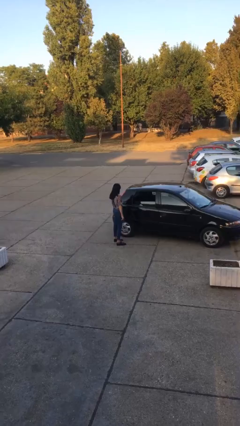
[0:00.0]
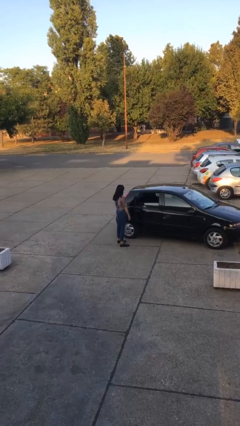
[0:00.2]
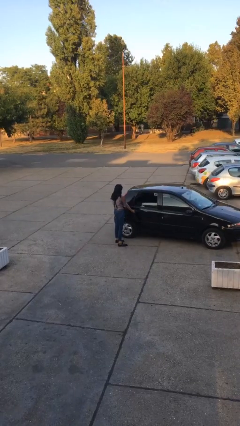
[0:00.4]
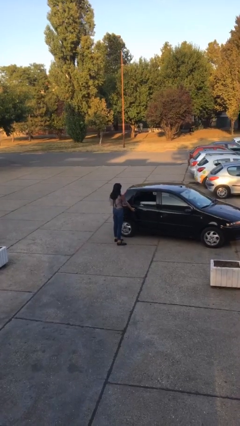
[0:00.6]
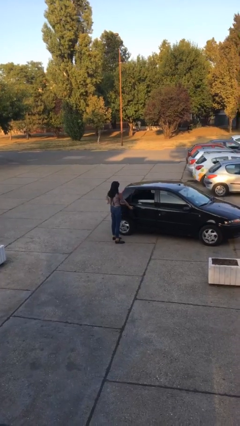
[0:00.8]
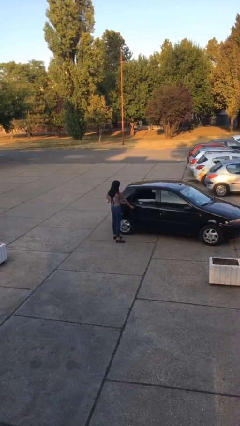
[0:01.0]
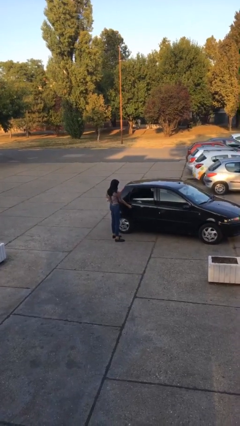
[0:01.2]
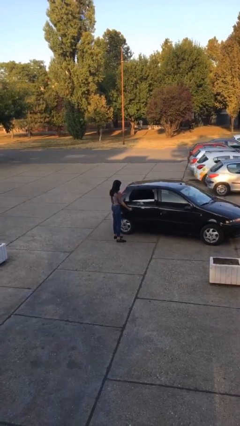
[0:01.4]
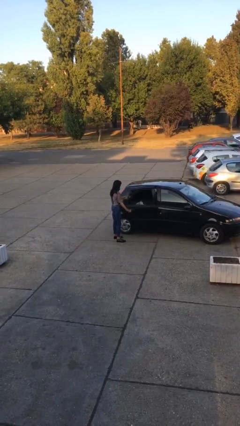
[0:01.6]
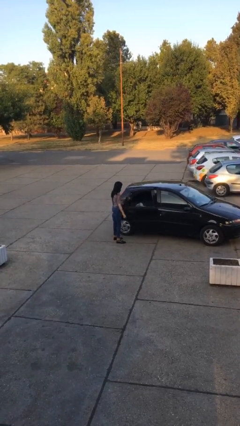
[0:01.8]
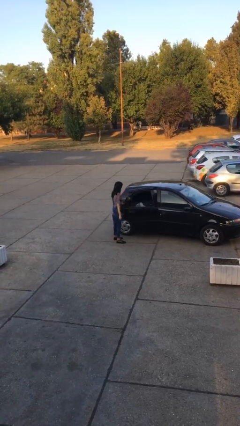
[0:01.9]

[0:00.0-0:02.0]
person opens car door

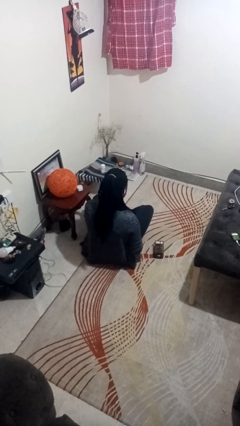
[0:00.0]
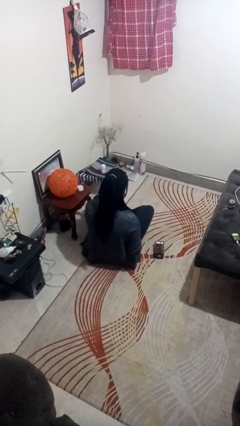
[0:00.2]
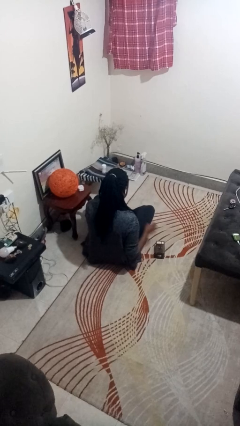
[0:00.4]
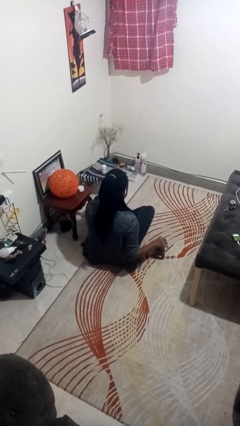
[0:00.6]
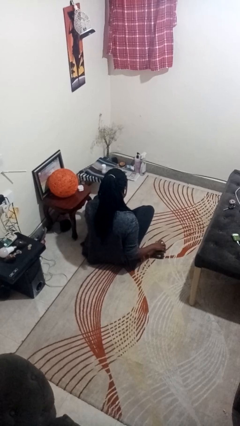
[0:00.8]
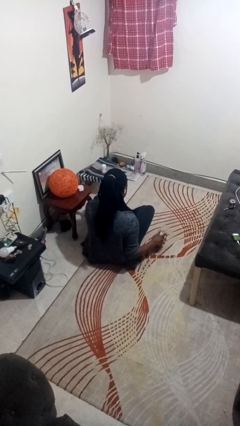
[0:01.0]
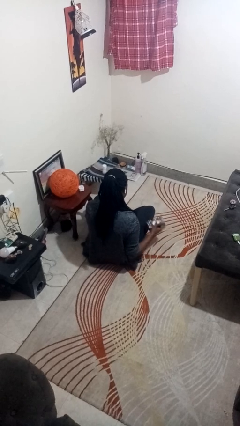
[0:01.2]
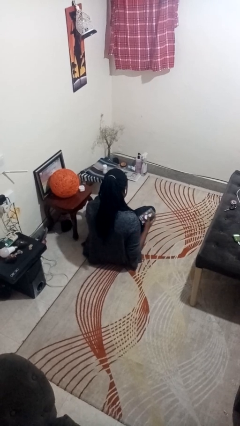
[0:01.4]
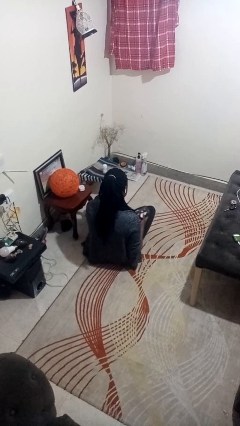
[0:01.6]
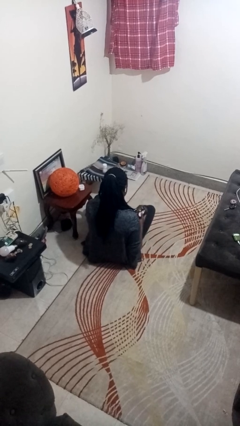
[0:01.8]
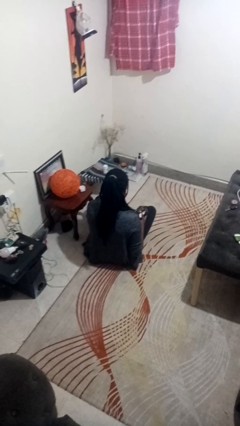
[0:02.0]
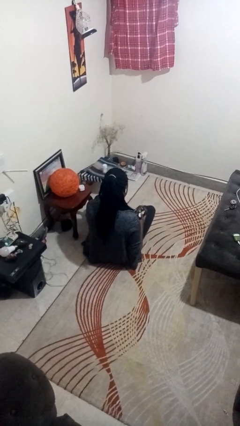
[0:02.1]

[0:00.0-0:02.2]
person picks up object from floor

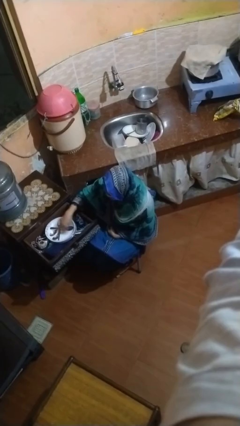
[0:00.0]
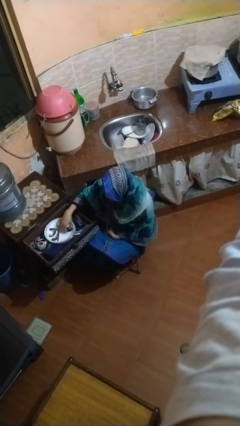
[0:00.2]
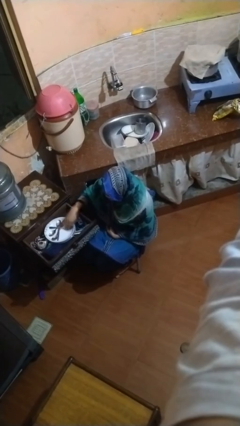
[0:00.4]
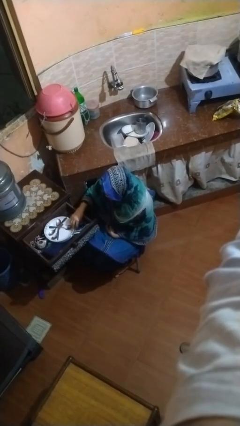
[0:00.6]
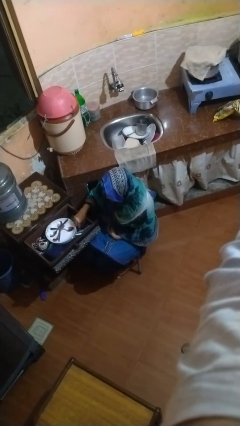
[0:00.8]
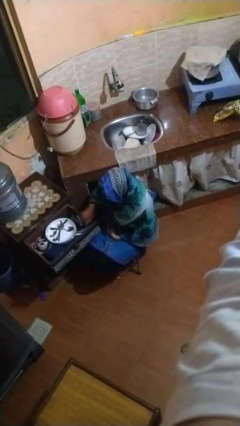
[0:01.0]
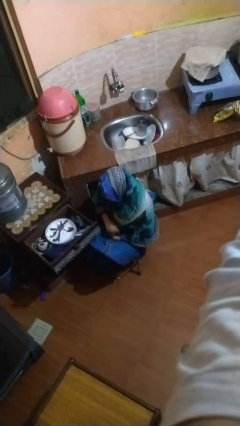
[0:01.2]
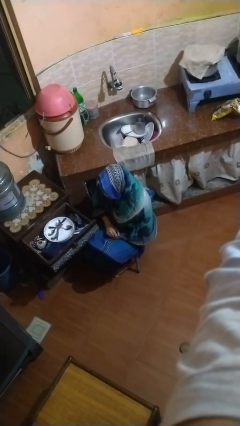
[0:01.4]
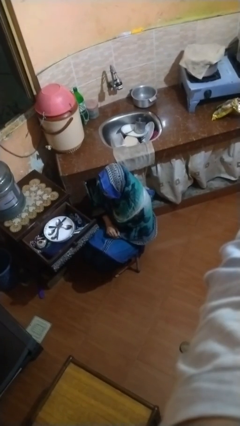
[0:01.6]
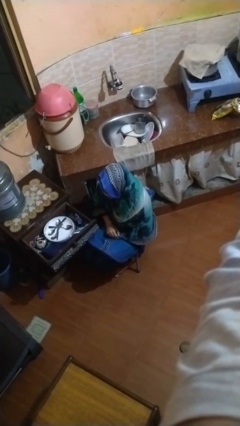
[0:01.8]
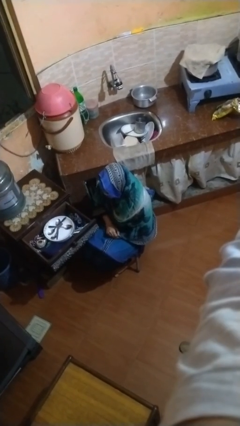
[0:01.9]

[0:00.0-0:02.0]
person searches in kitchen drawer

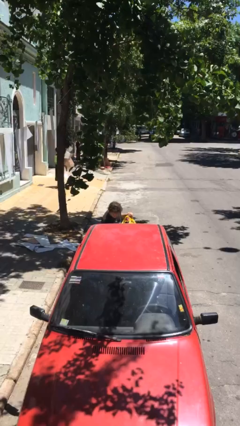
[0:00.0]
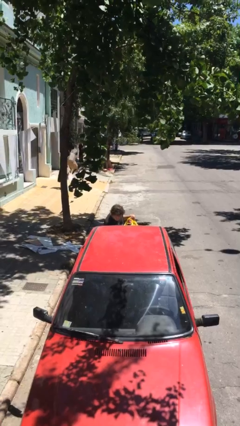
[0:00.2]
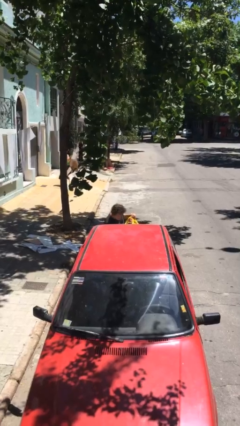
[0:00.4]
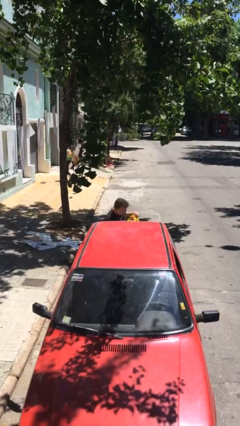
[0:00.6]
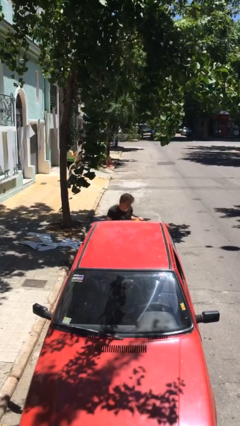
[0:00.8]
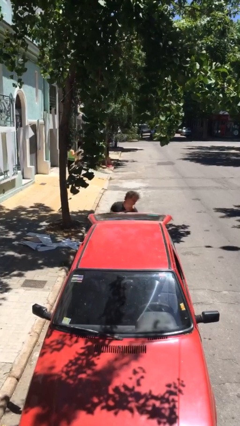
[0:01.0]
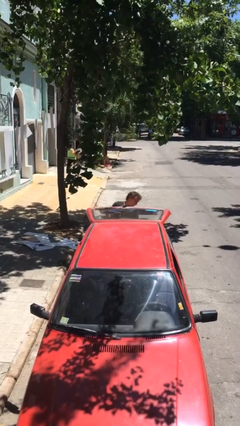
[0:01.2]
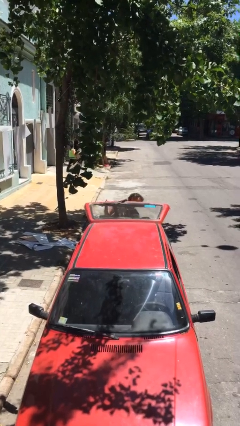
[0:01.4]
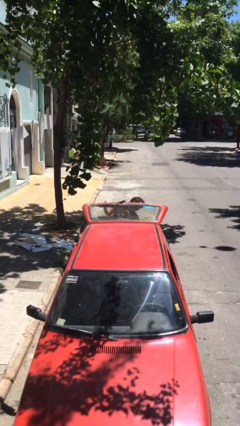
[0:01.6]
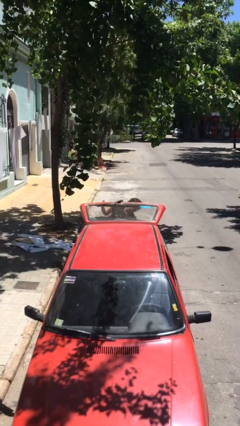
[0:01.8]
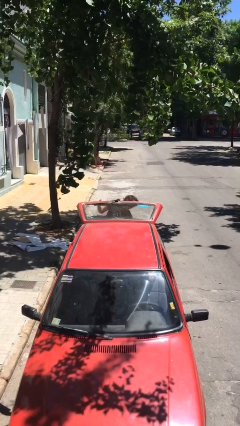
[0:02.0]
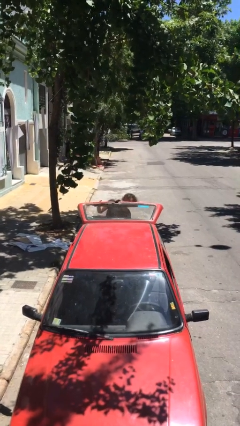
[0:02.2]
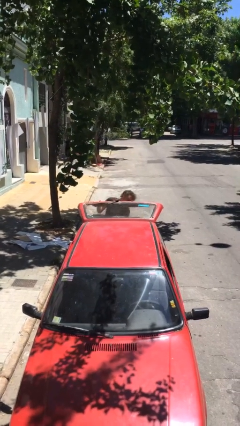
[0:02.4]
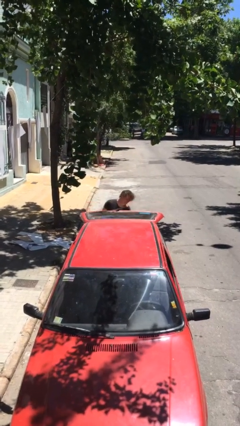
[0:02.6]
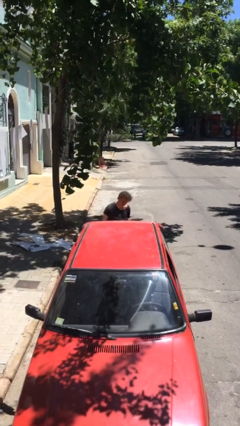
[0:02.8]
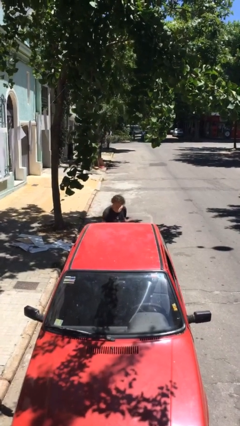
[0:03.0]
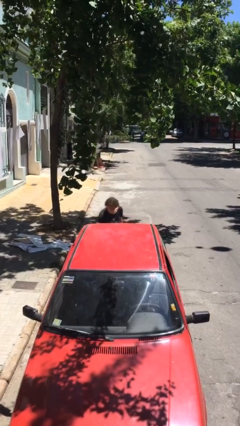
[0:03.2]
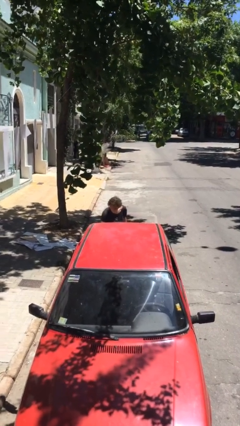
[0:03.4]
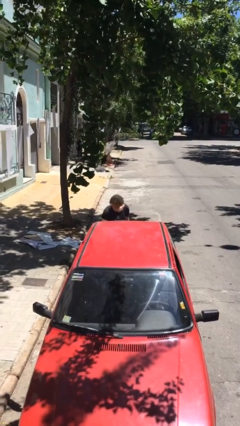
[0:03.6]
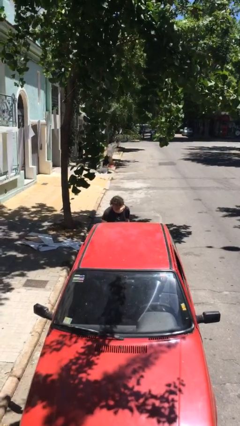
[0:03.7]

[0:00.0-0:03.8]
person loads car

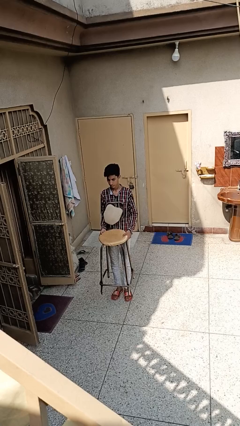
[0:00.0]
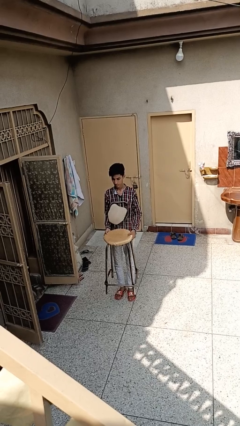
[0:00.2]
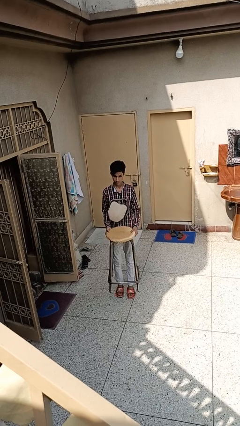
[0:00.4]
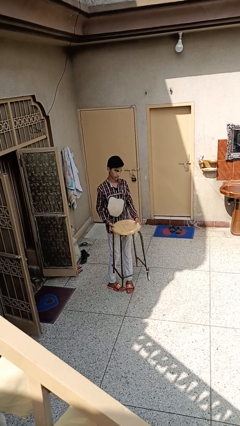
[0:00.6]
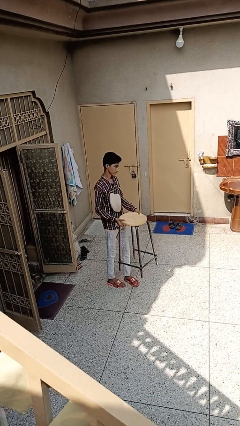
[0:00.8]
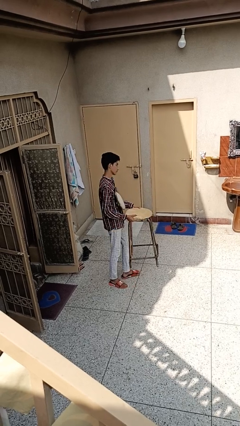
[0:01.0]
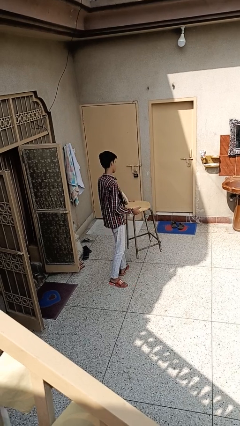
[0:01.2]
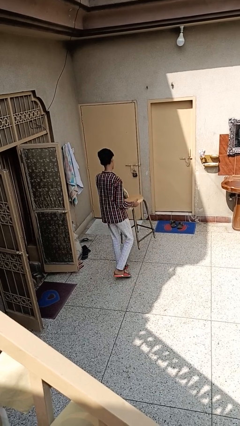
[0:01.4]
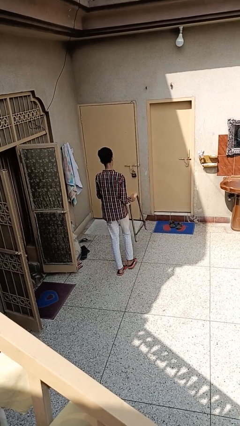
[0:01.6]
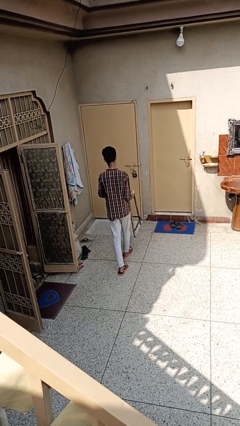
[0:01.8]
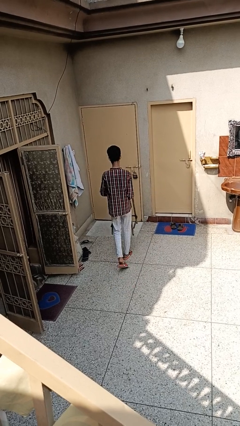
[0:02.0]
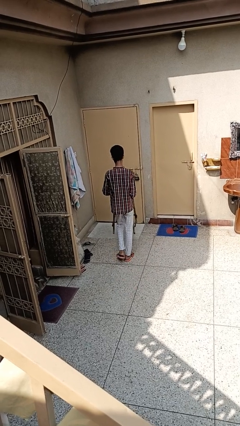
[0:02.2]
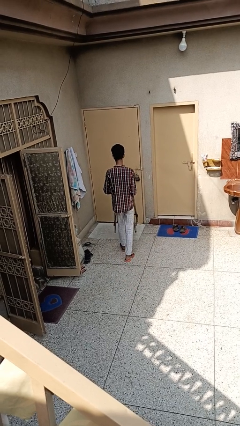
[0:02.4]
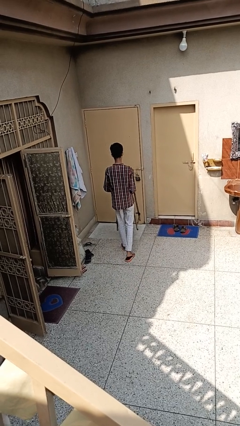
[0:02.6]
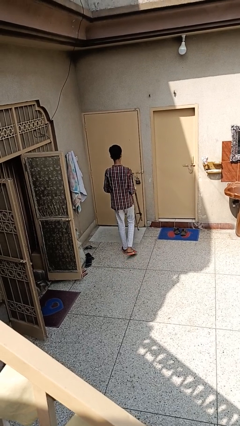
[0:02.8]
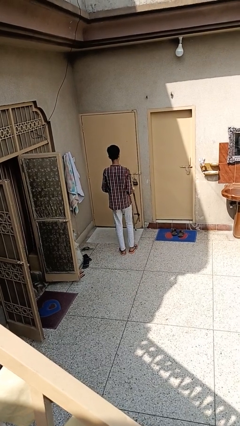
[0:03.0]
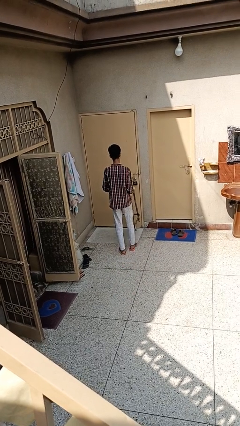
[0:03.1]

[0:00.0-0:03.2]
person carries furniture

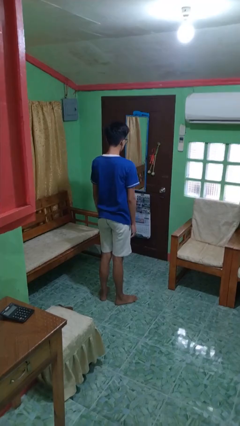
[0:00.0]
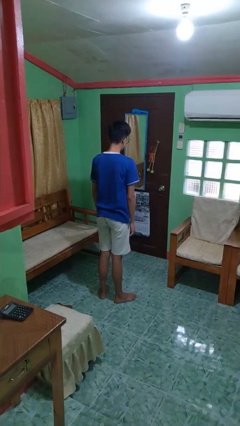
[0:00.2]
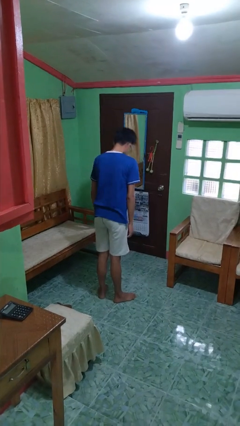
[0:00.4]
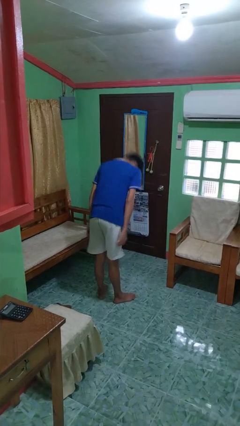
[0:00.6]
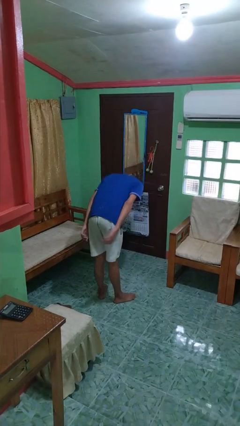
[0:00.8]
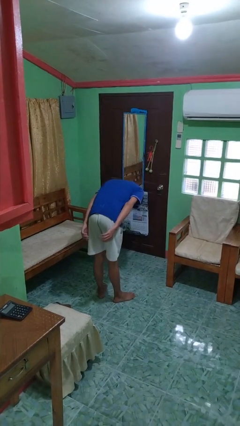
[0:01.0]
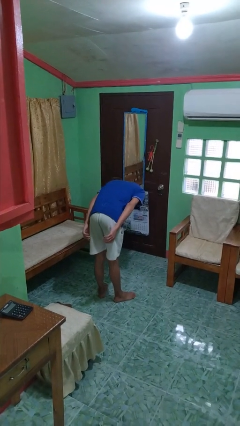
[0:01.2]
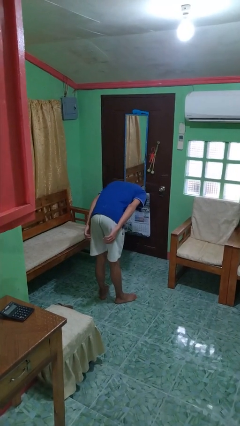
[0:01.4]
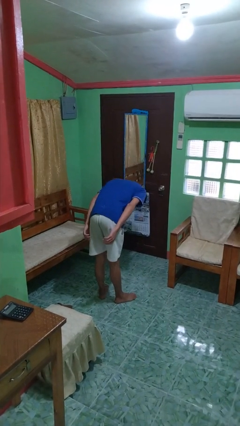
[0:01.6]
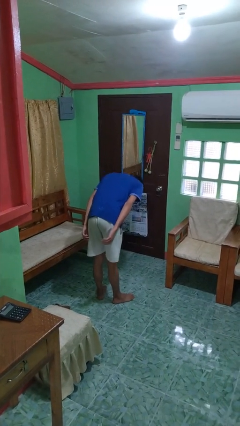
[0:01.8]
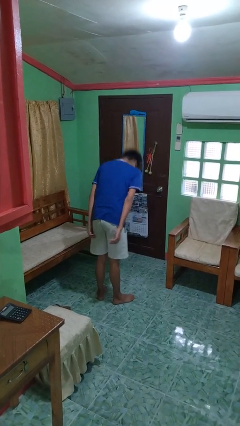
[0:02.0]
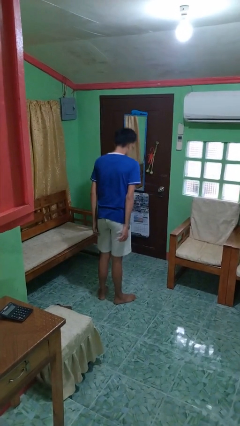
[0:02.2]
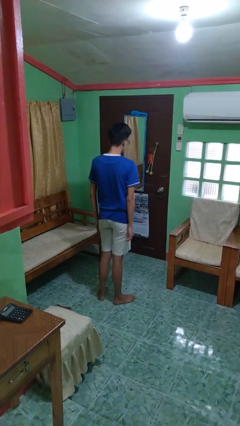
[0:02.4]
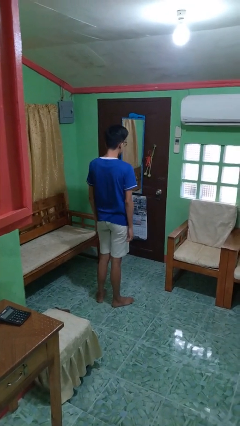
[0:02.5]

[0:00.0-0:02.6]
person bows

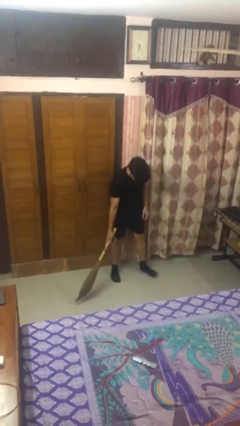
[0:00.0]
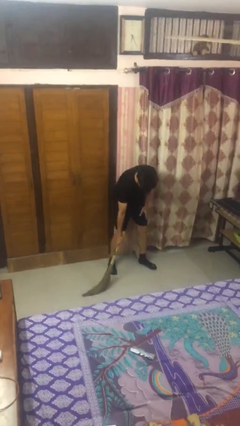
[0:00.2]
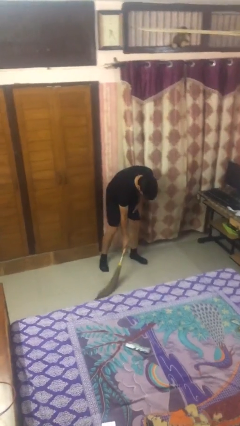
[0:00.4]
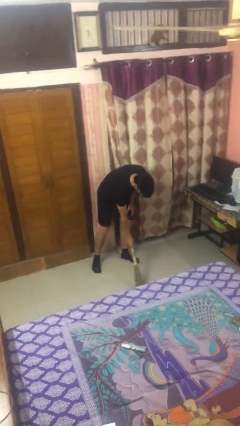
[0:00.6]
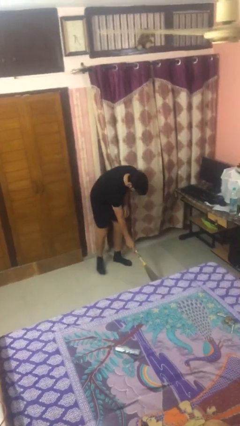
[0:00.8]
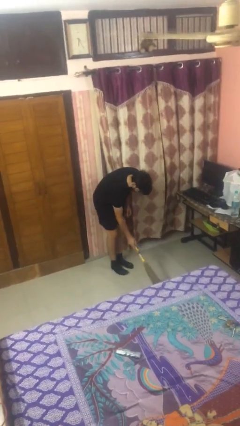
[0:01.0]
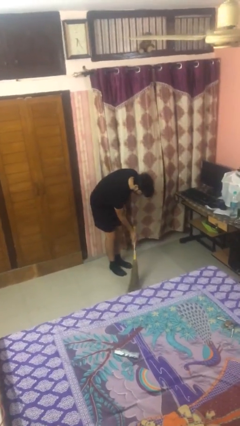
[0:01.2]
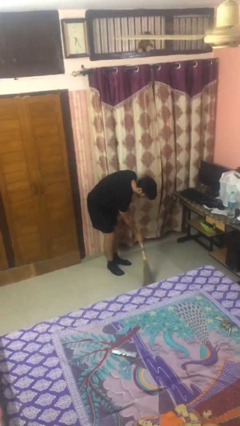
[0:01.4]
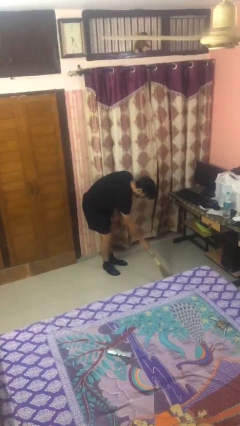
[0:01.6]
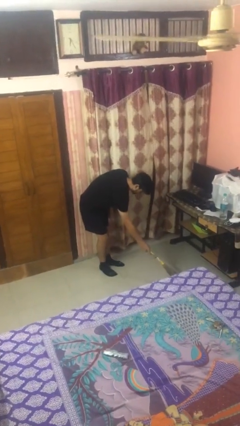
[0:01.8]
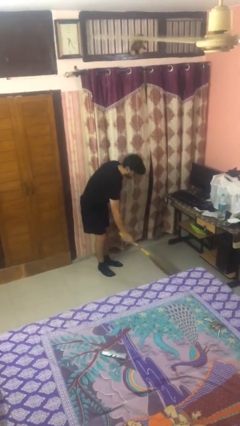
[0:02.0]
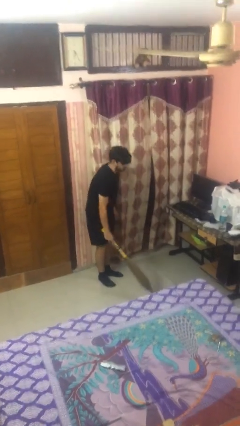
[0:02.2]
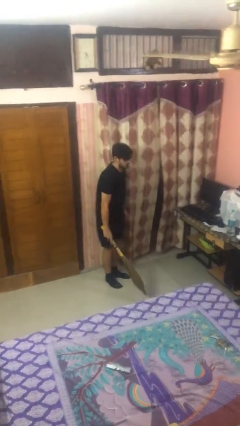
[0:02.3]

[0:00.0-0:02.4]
person sweeps floor
